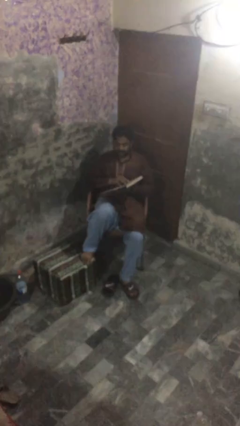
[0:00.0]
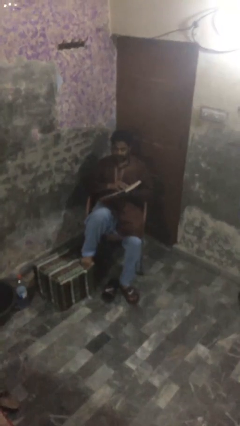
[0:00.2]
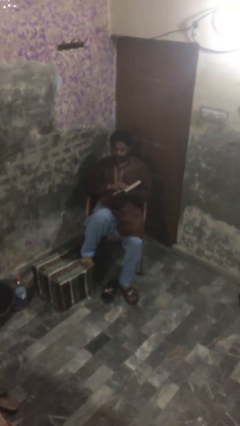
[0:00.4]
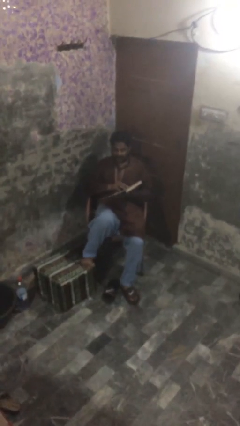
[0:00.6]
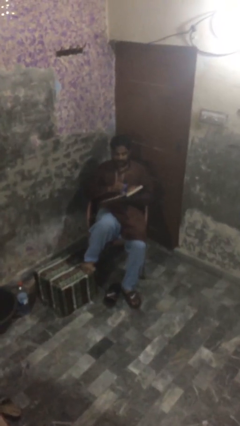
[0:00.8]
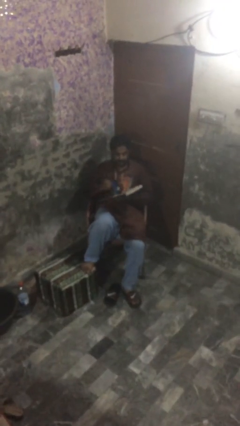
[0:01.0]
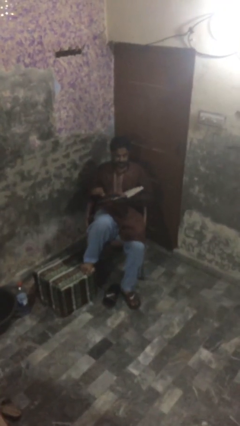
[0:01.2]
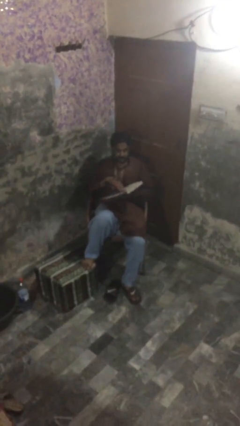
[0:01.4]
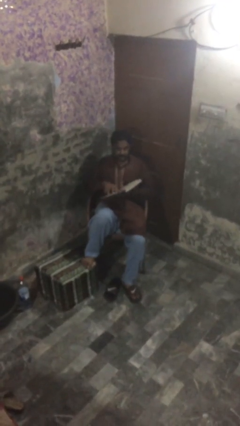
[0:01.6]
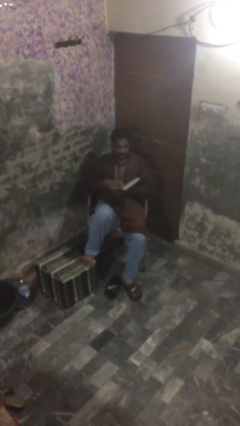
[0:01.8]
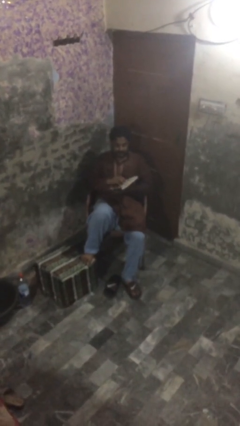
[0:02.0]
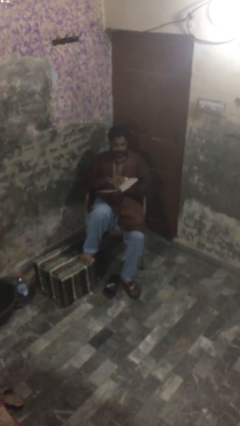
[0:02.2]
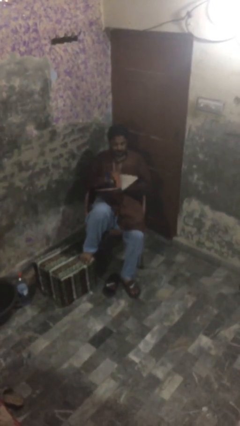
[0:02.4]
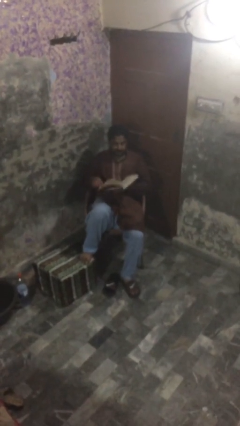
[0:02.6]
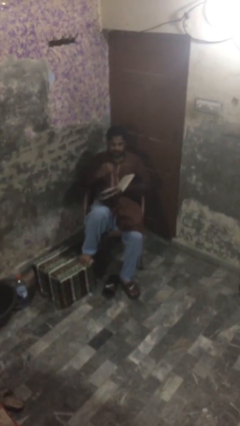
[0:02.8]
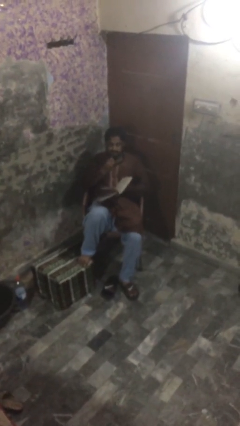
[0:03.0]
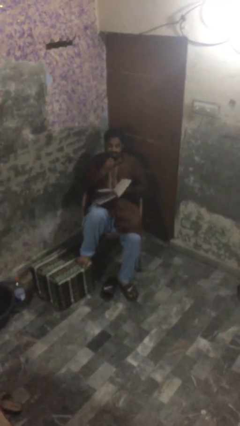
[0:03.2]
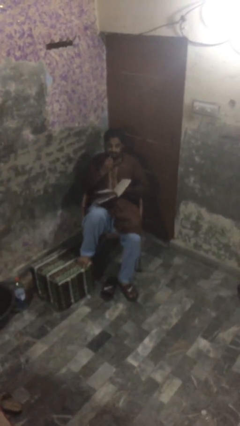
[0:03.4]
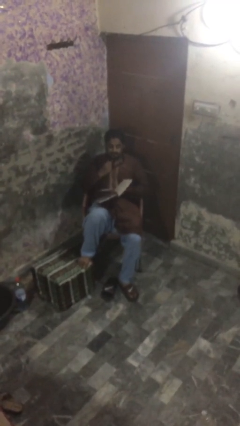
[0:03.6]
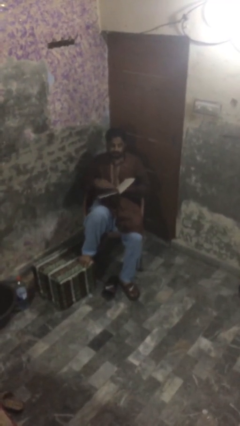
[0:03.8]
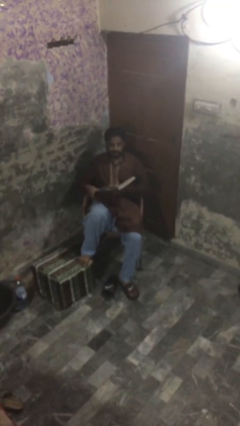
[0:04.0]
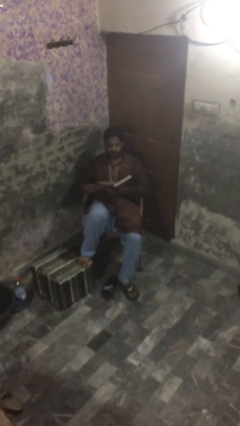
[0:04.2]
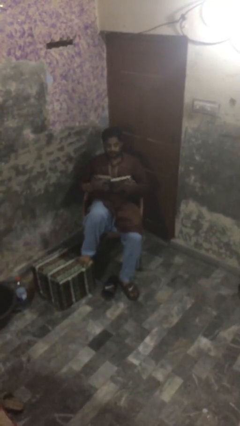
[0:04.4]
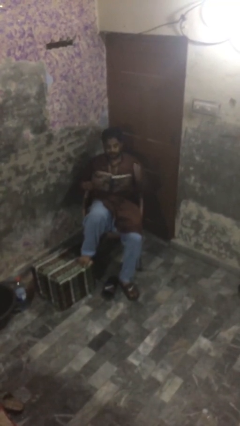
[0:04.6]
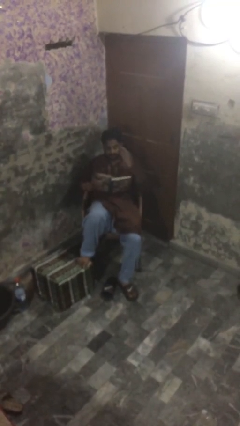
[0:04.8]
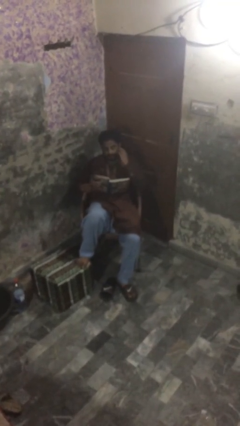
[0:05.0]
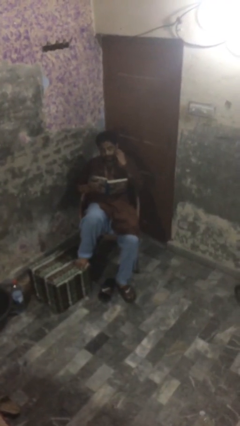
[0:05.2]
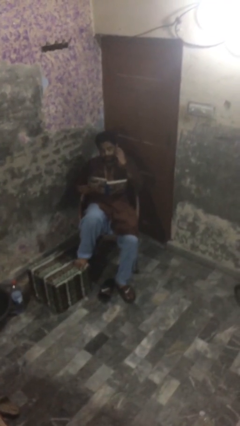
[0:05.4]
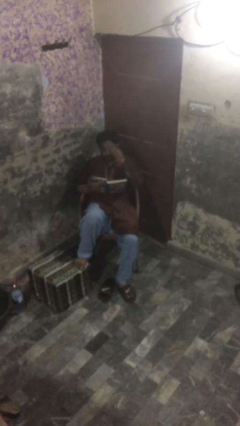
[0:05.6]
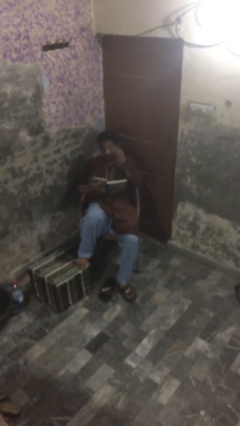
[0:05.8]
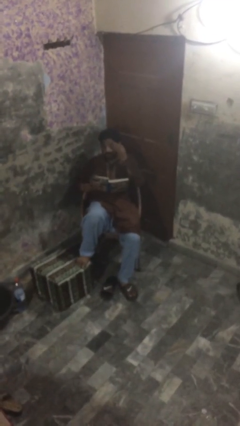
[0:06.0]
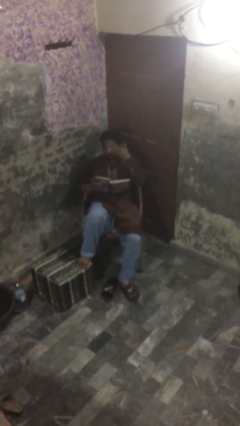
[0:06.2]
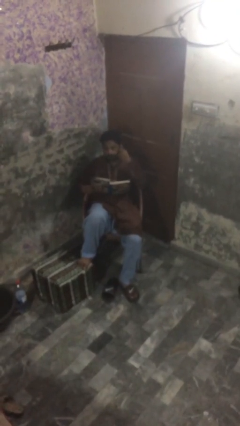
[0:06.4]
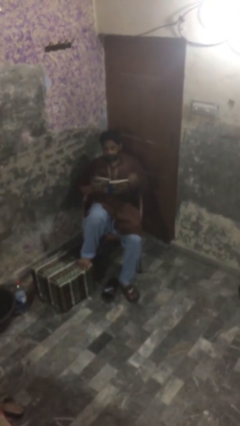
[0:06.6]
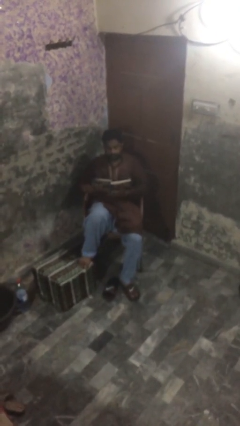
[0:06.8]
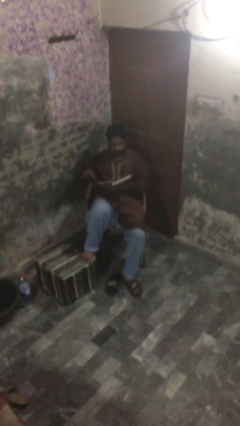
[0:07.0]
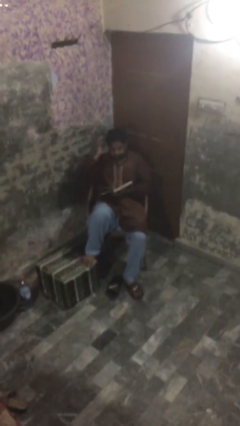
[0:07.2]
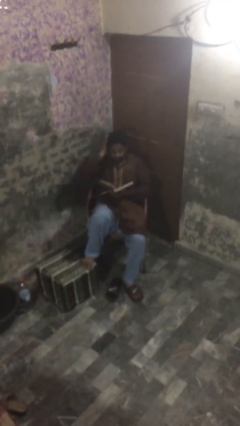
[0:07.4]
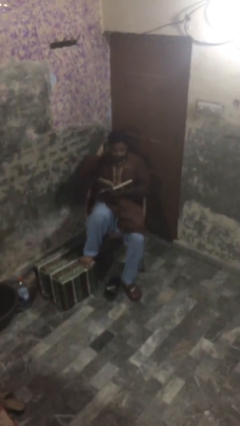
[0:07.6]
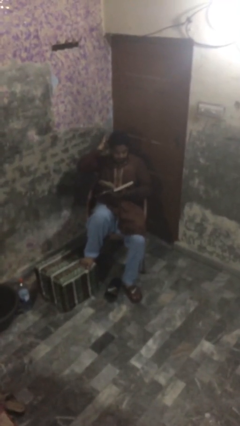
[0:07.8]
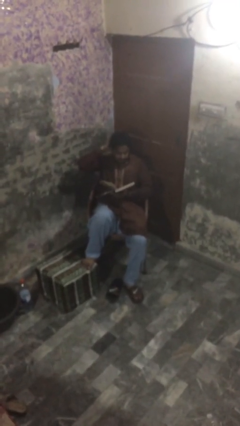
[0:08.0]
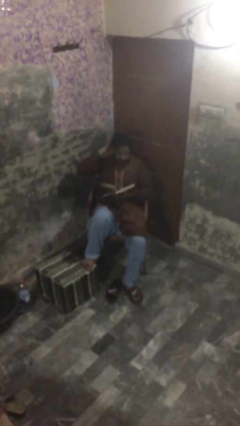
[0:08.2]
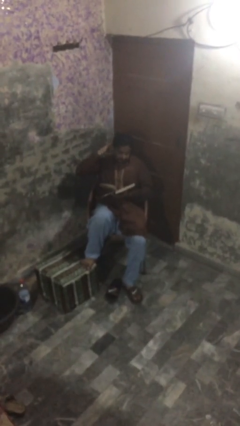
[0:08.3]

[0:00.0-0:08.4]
person reads document

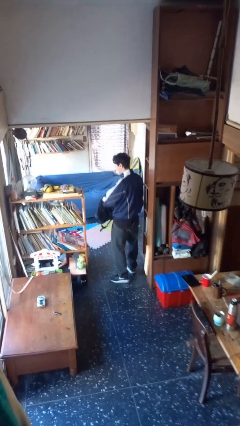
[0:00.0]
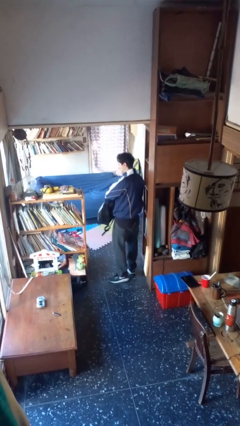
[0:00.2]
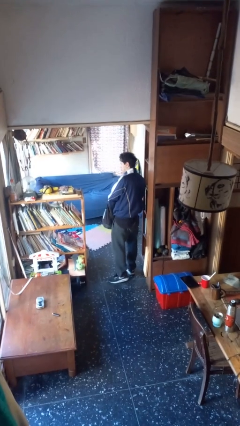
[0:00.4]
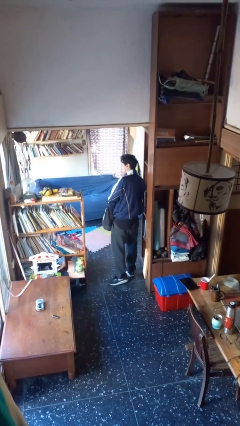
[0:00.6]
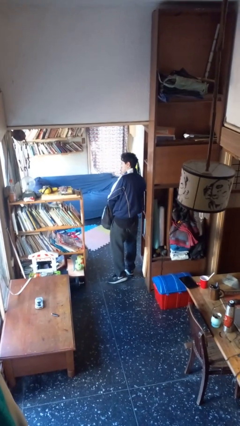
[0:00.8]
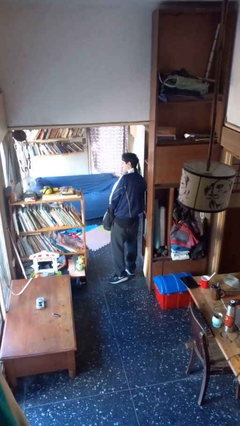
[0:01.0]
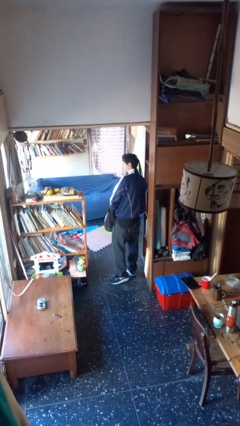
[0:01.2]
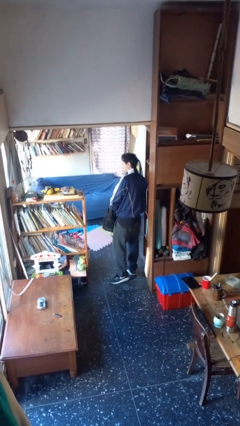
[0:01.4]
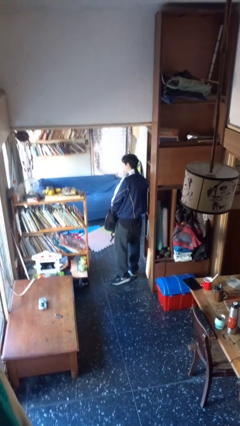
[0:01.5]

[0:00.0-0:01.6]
person searches in backpack

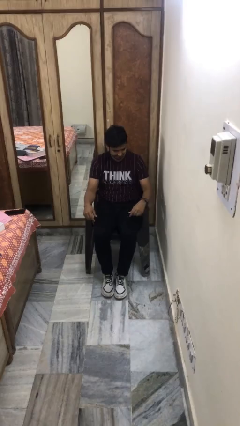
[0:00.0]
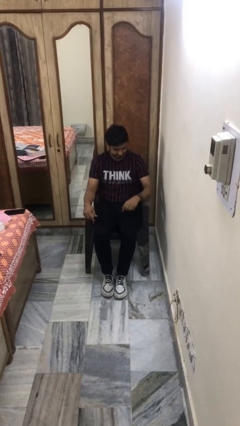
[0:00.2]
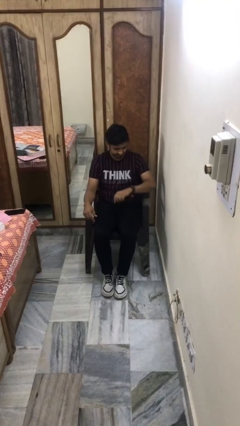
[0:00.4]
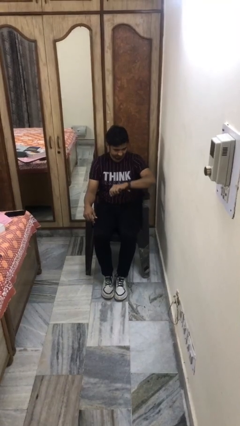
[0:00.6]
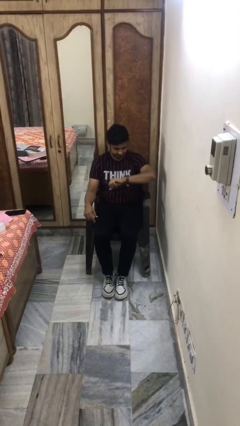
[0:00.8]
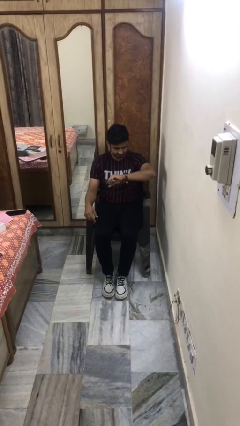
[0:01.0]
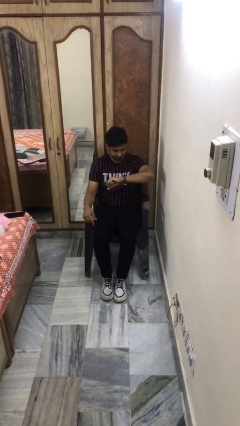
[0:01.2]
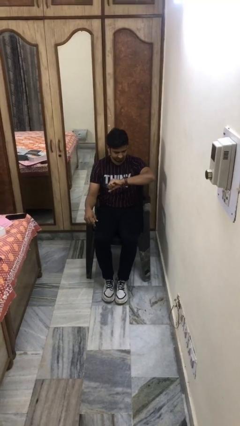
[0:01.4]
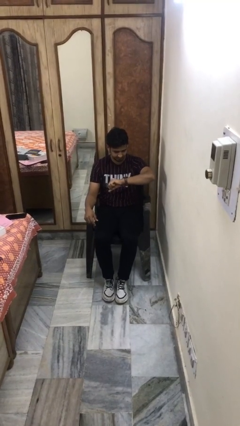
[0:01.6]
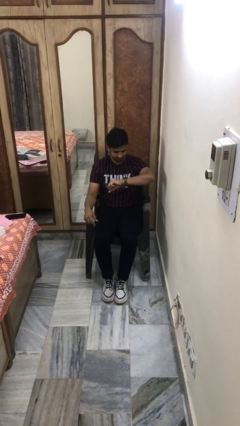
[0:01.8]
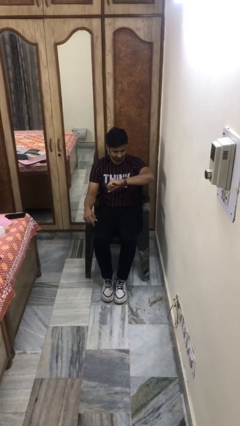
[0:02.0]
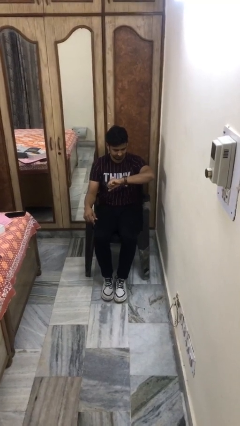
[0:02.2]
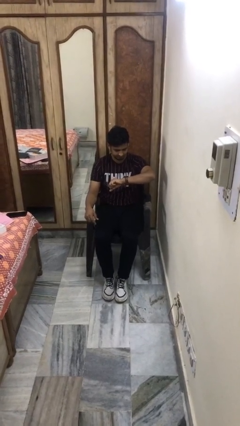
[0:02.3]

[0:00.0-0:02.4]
person looks at wristwatch

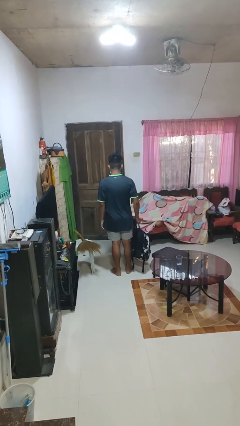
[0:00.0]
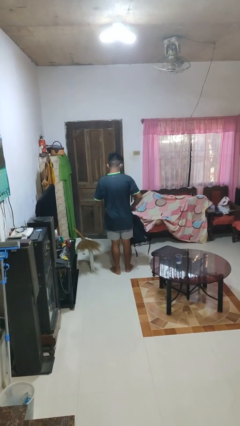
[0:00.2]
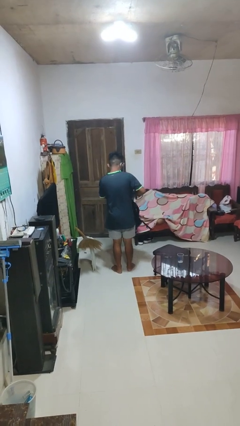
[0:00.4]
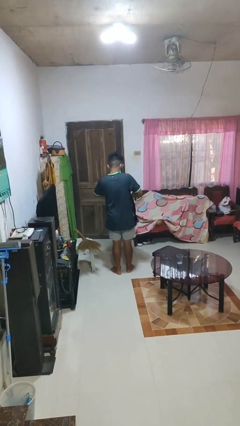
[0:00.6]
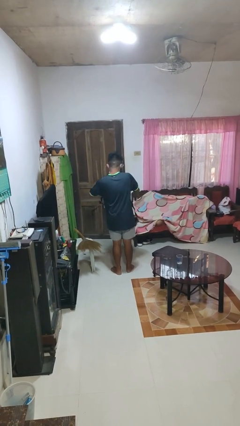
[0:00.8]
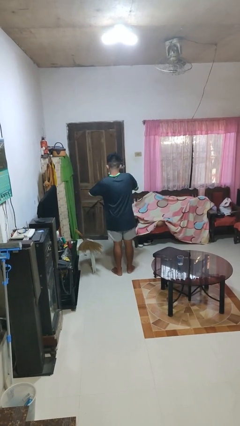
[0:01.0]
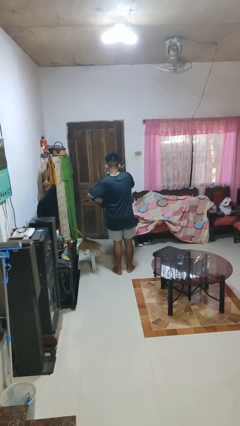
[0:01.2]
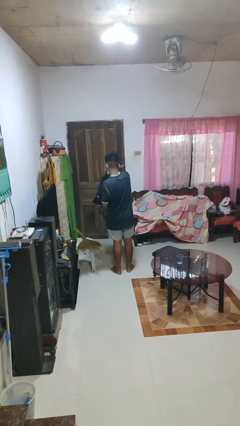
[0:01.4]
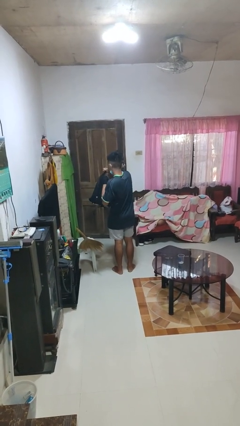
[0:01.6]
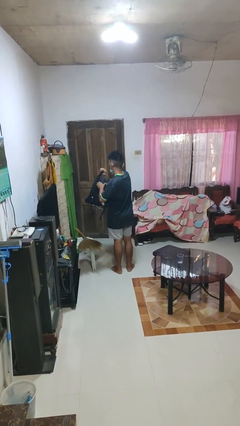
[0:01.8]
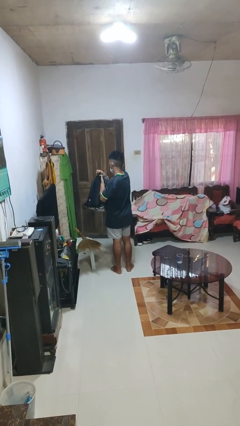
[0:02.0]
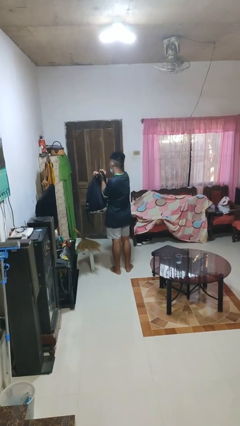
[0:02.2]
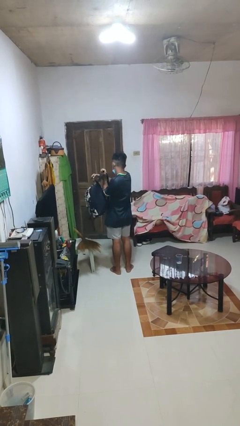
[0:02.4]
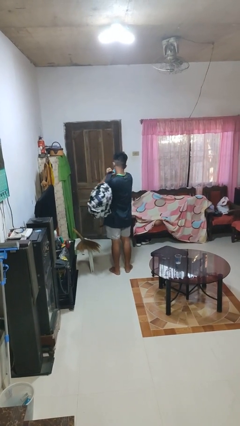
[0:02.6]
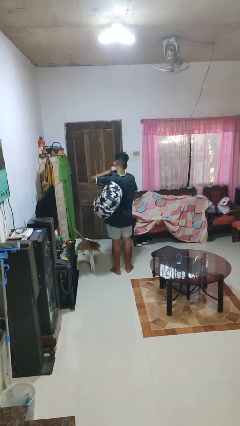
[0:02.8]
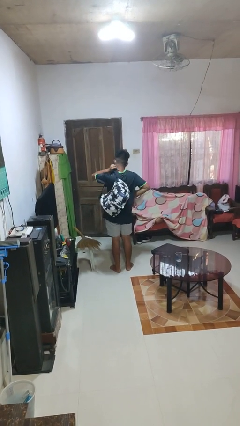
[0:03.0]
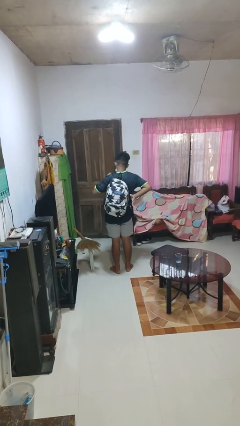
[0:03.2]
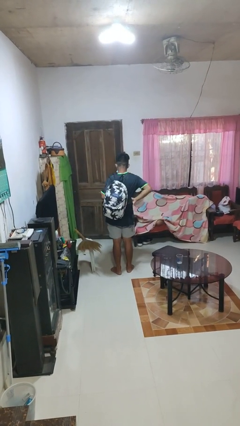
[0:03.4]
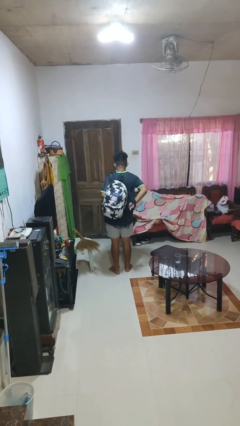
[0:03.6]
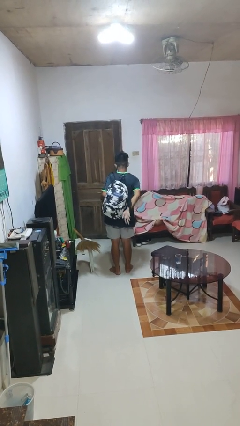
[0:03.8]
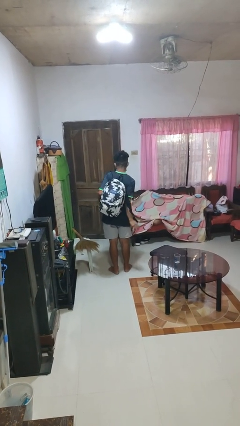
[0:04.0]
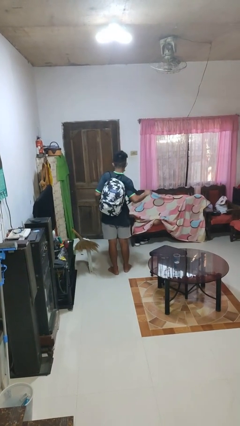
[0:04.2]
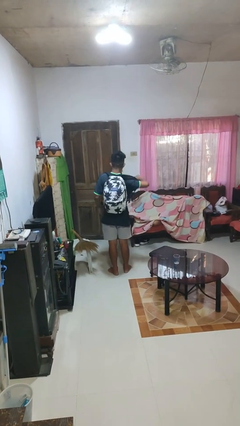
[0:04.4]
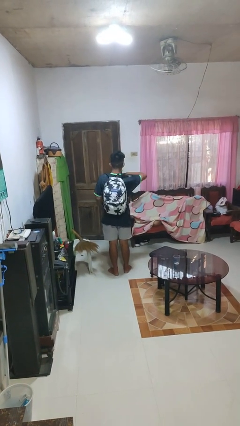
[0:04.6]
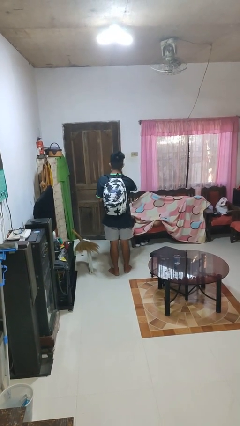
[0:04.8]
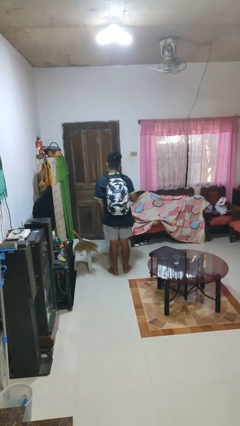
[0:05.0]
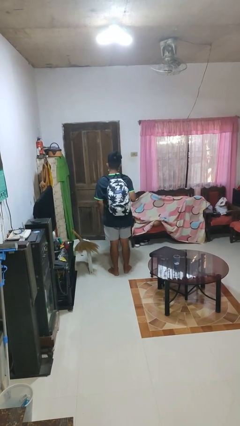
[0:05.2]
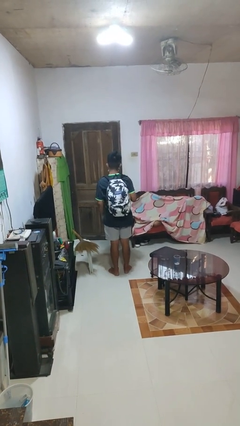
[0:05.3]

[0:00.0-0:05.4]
person puts on backpack
